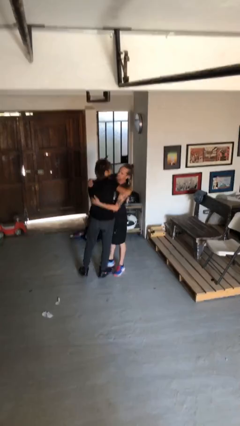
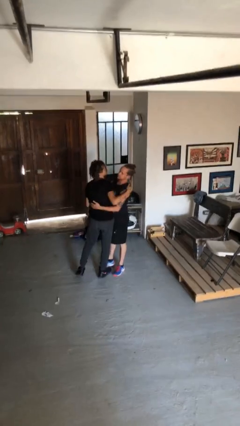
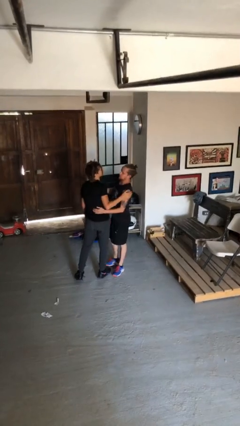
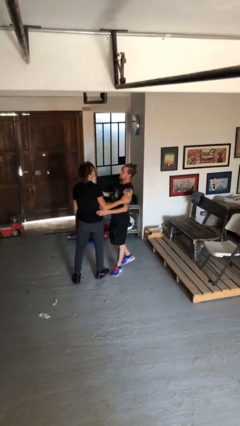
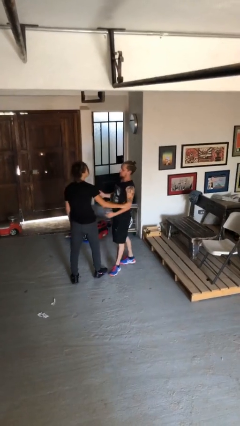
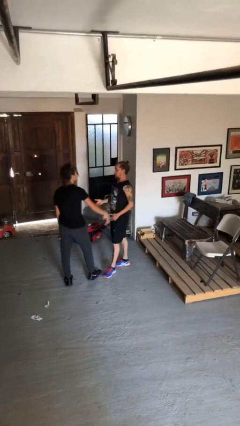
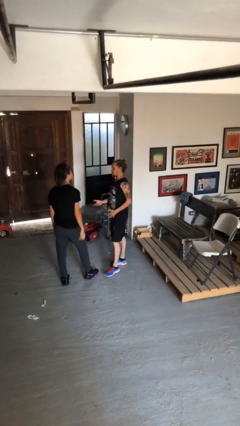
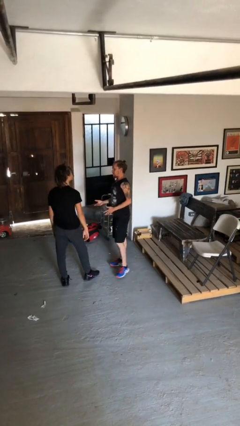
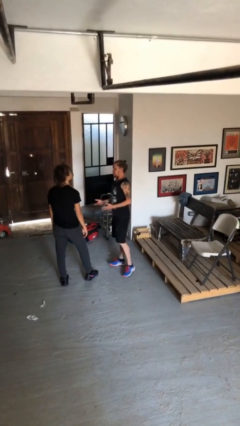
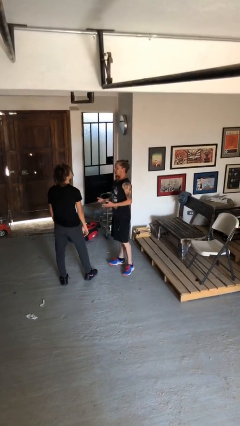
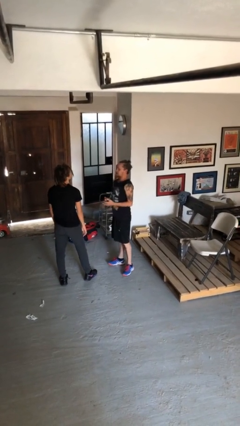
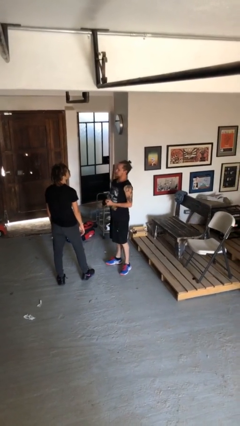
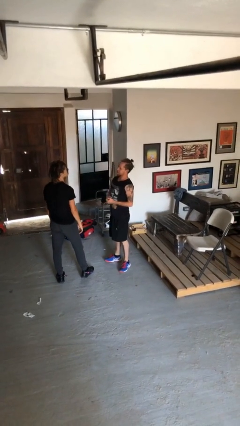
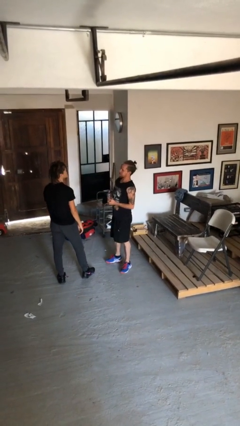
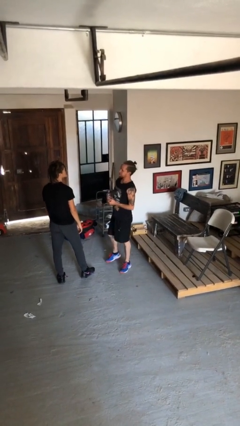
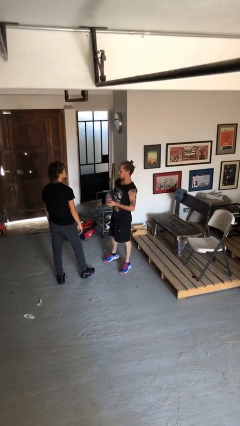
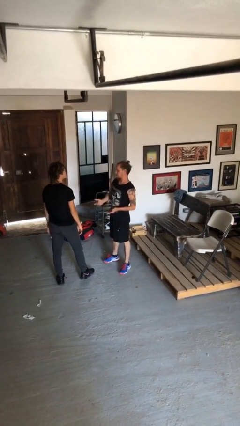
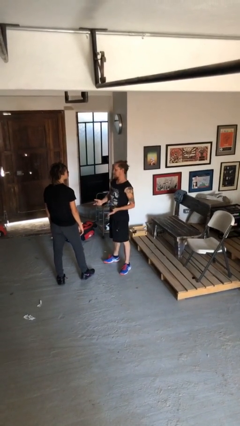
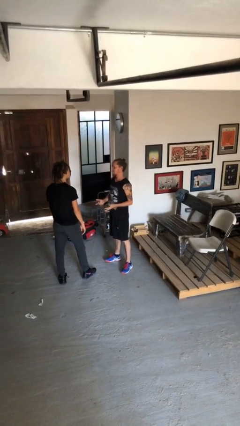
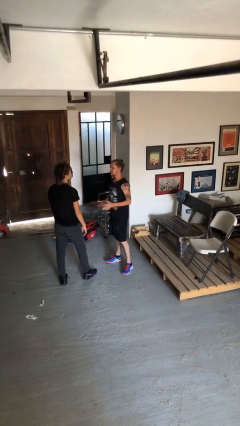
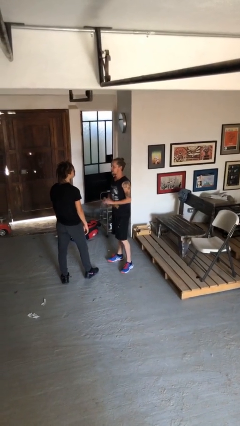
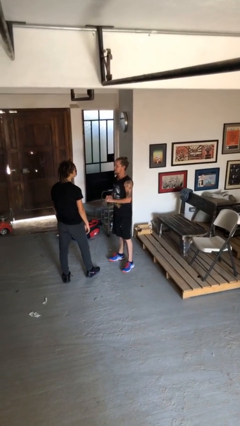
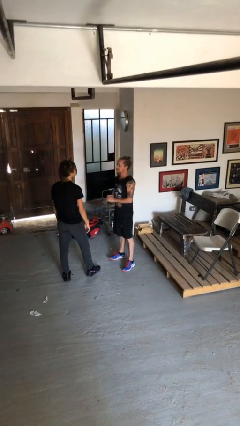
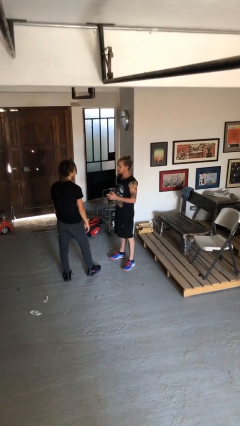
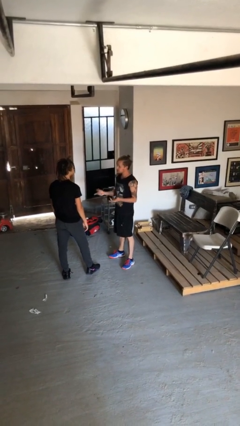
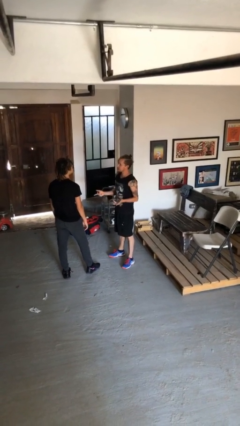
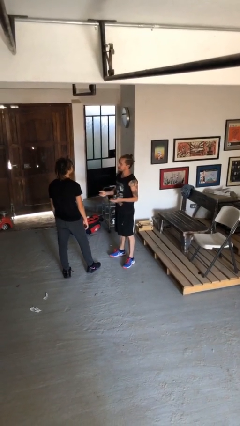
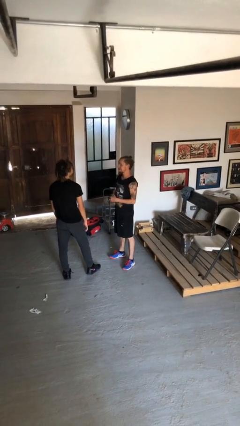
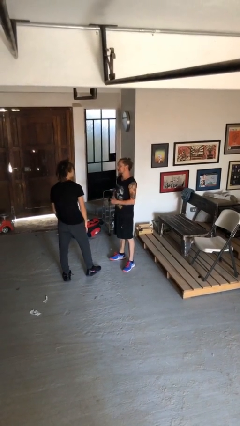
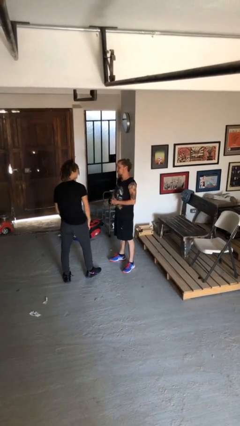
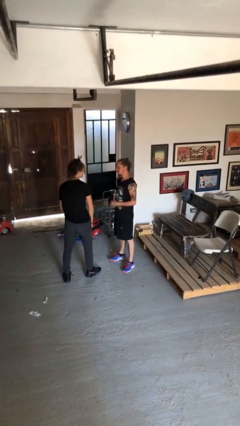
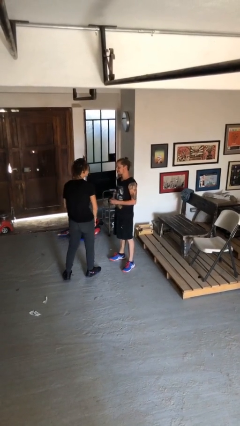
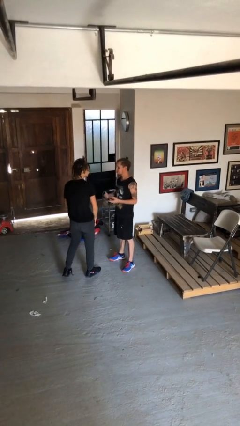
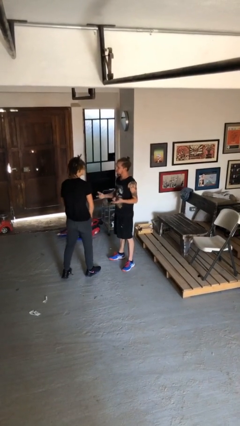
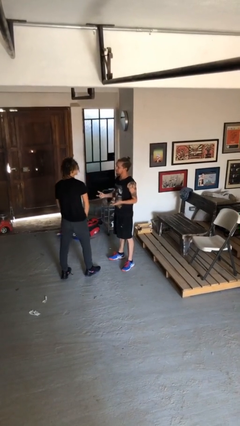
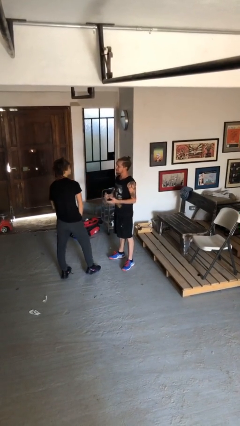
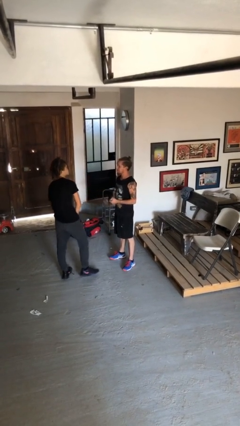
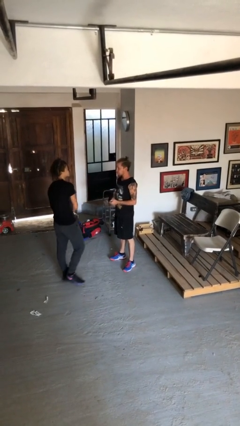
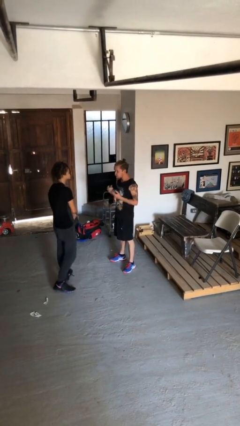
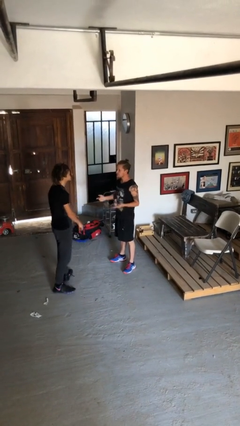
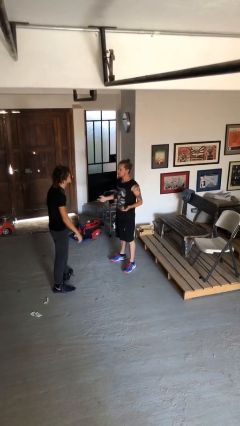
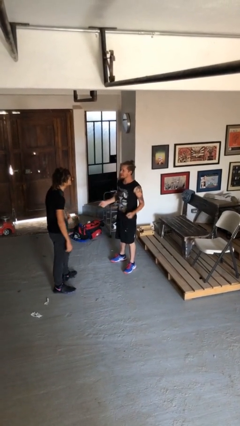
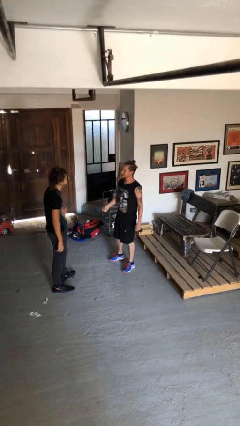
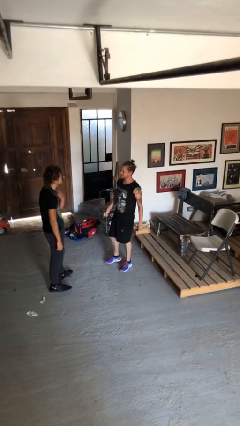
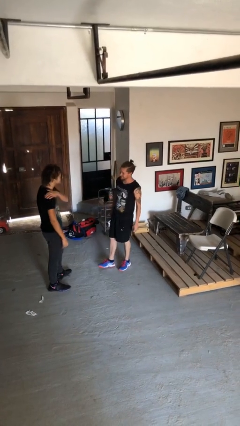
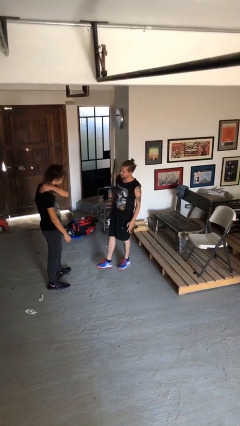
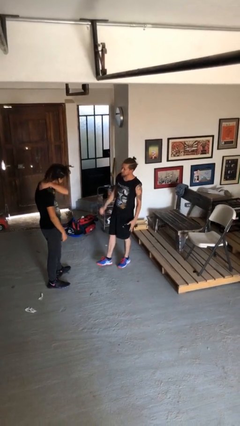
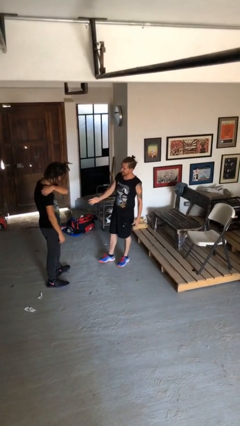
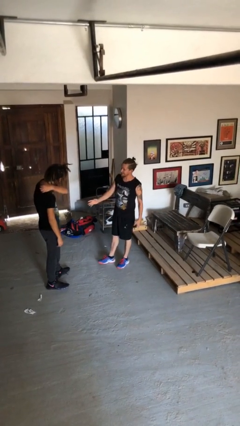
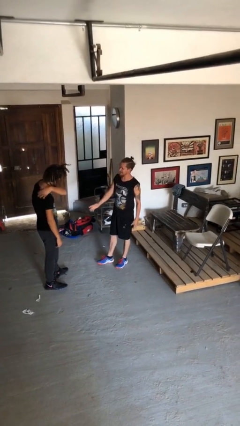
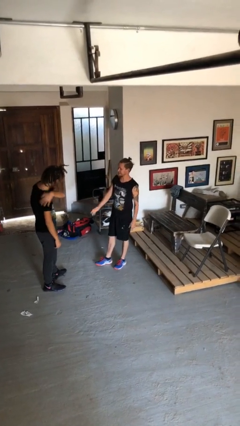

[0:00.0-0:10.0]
person talks to person

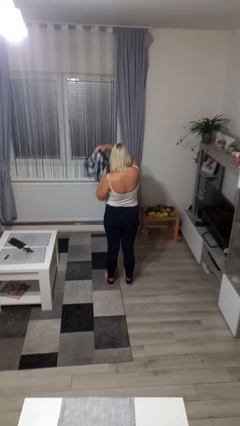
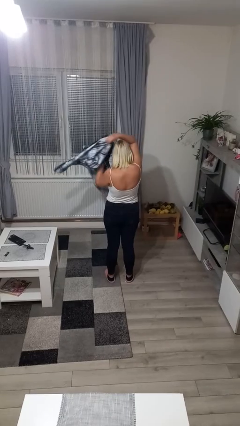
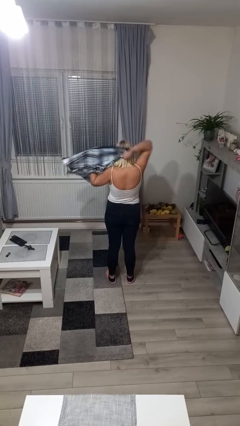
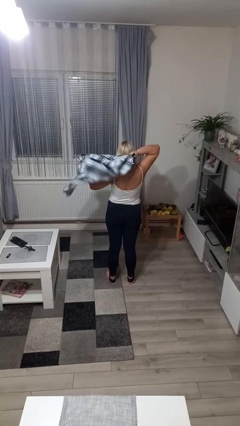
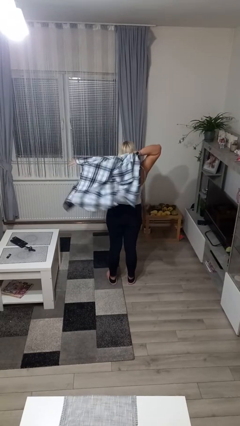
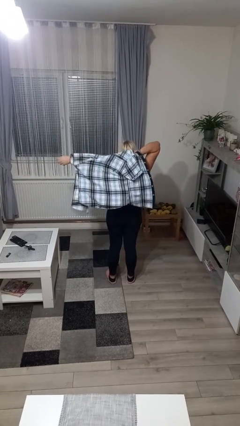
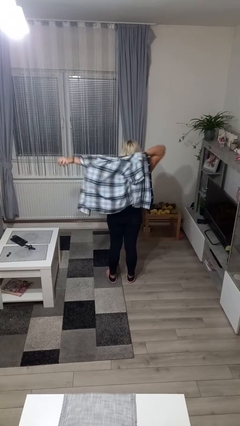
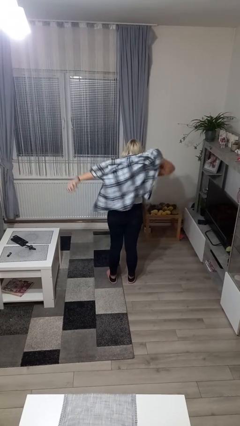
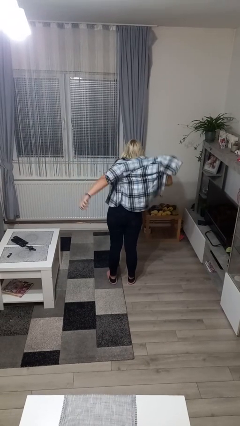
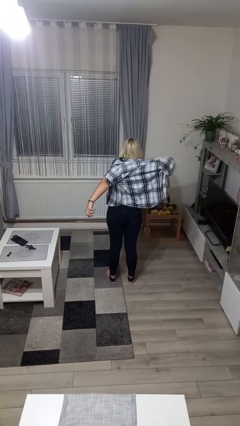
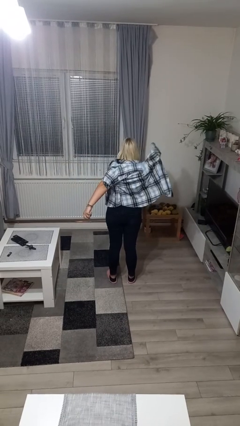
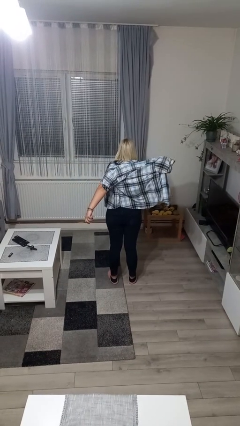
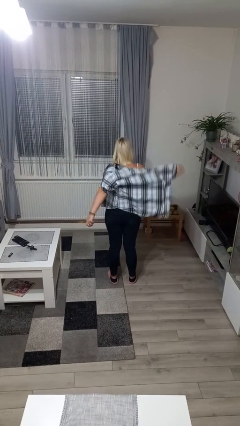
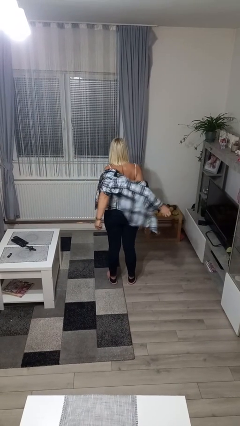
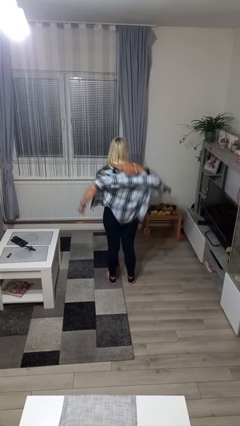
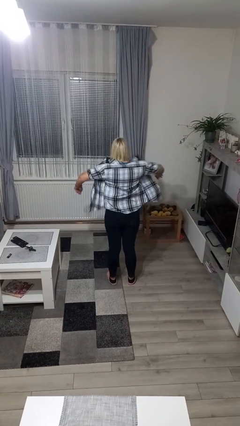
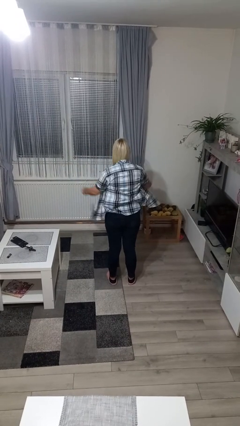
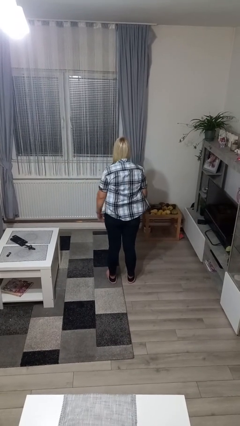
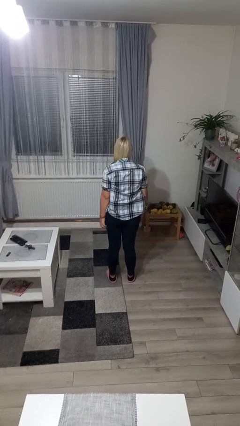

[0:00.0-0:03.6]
person puts on shirt

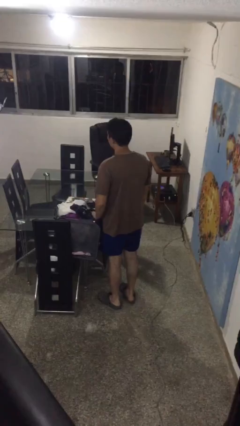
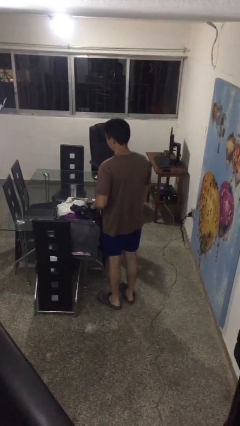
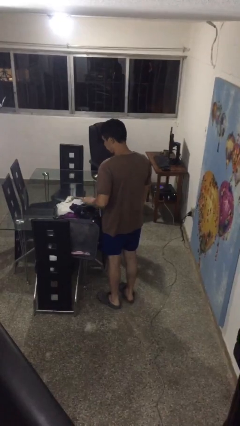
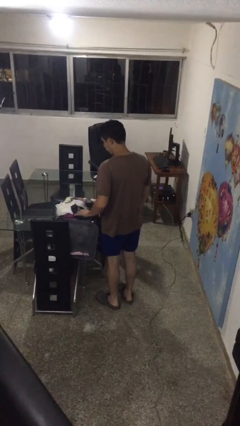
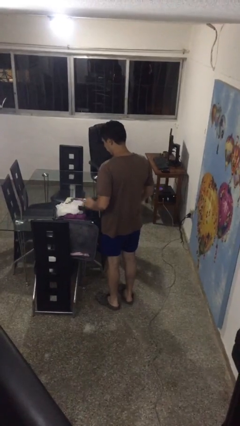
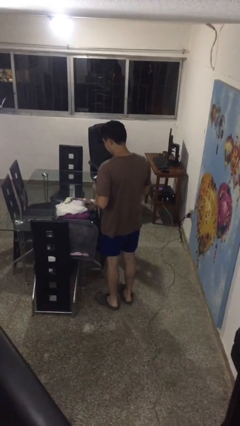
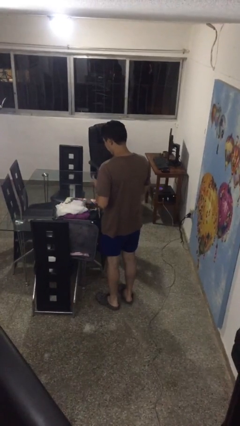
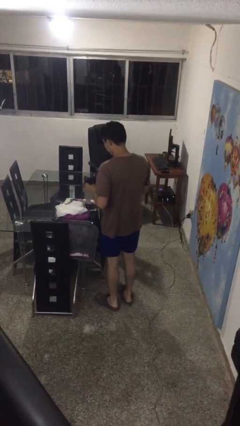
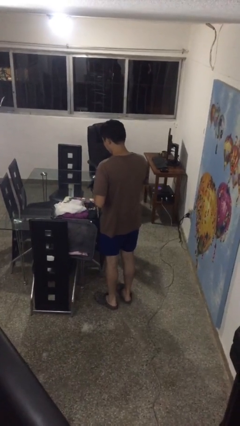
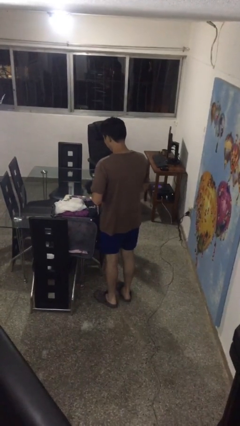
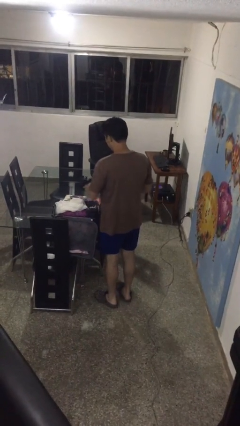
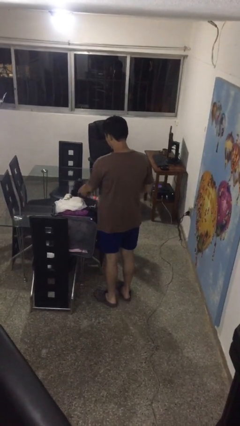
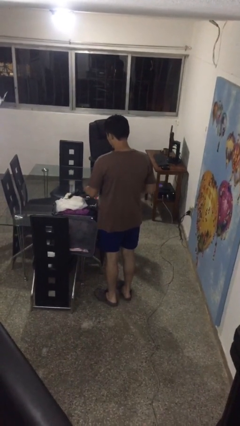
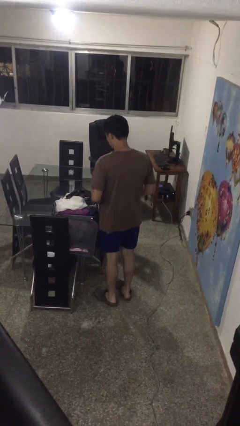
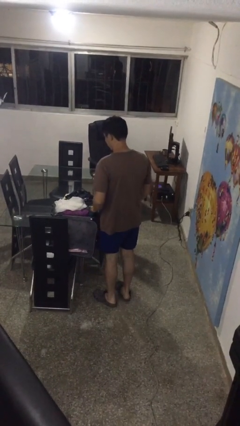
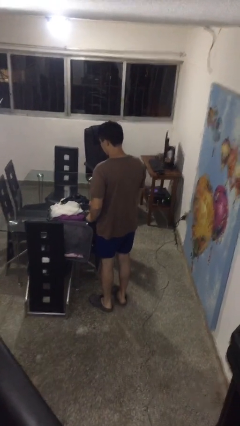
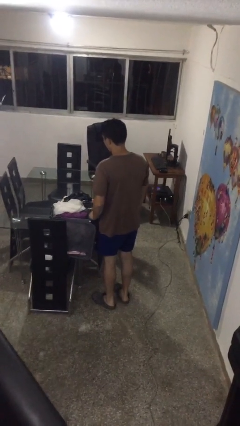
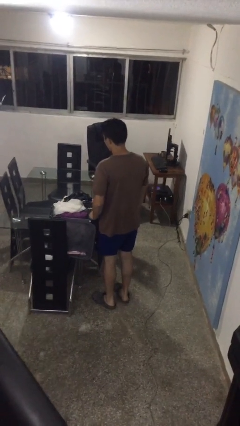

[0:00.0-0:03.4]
person unloads clothes from suitcase

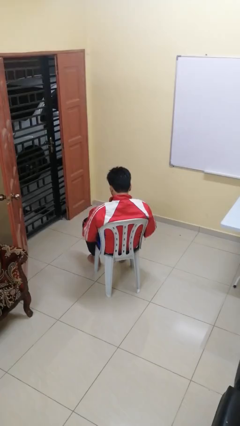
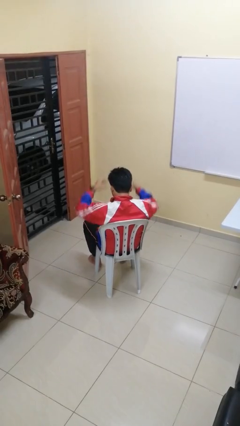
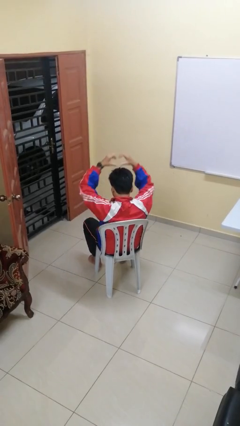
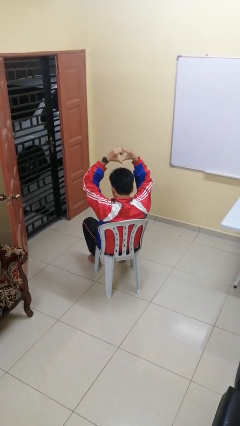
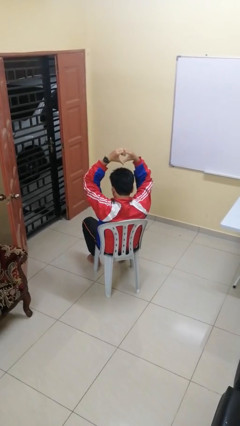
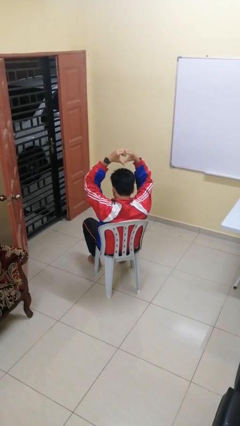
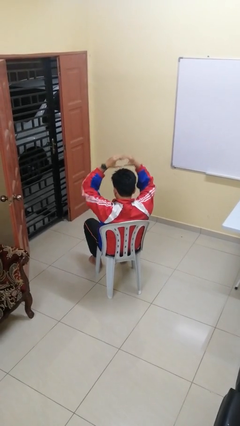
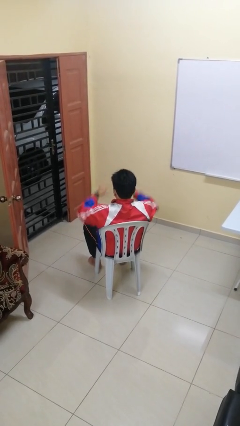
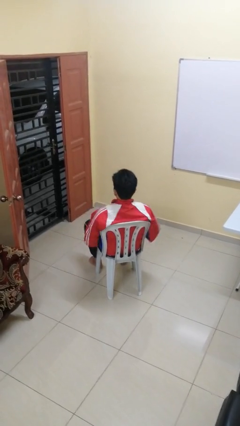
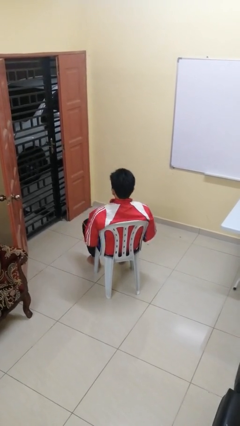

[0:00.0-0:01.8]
person gestures heart
